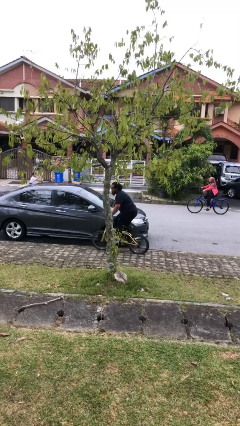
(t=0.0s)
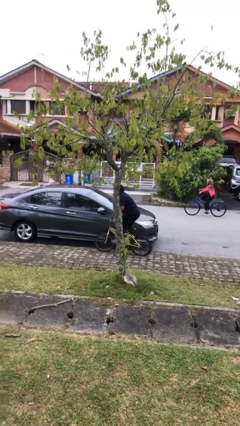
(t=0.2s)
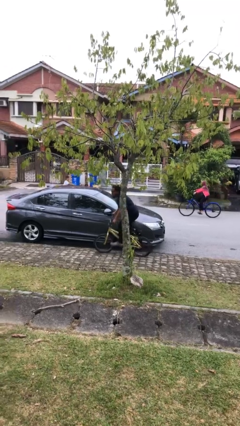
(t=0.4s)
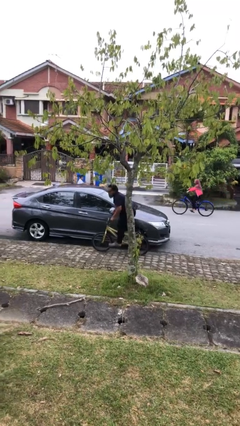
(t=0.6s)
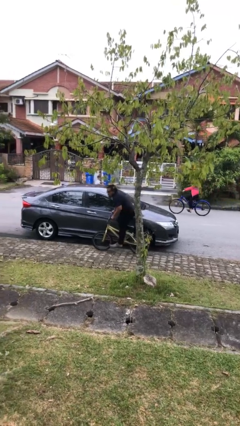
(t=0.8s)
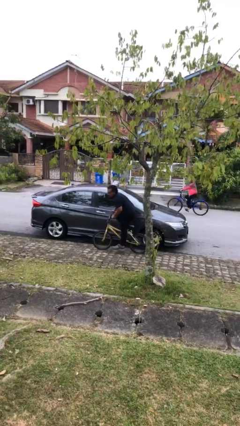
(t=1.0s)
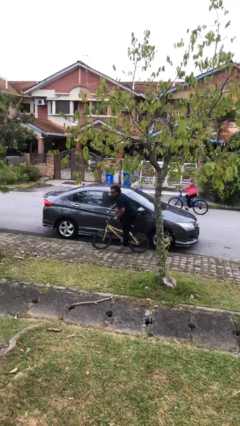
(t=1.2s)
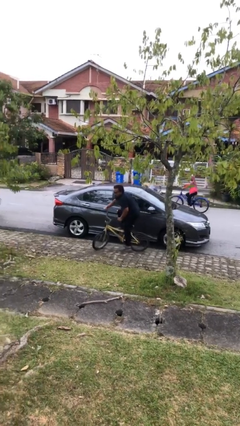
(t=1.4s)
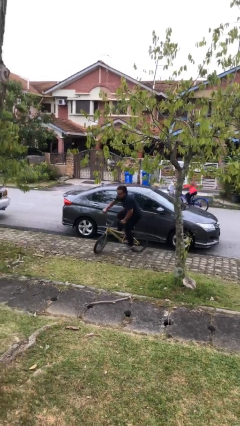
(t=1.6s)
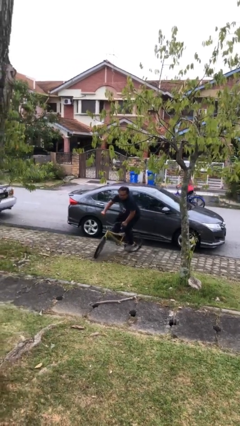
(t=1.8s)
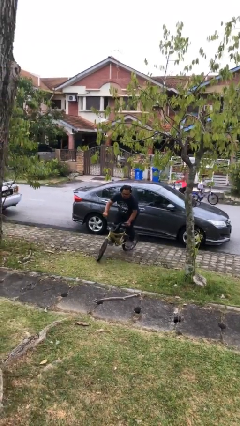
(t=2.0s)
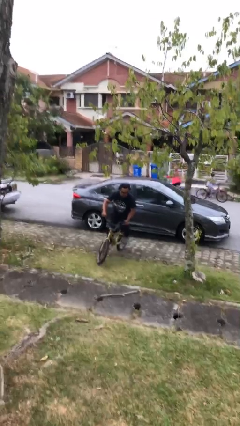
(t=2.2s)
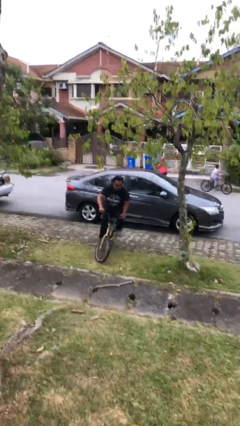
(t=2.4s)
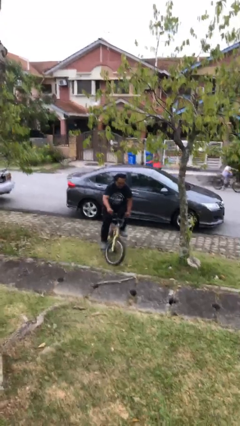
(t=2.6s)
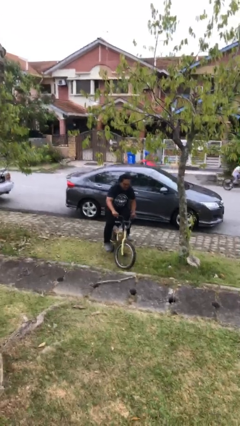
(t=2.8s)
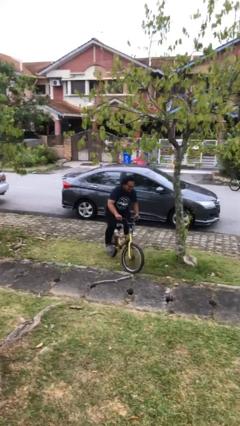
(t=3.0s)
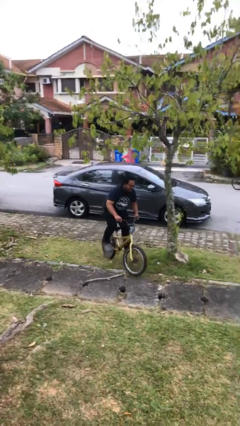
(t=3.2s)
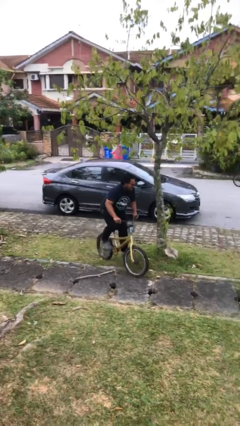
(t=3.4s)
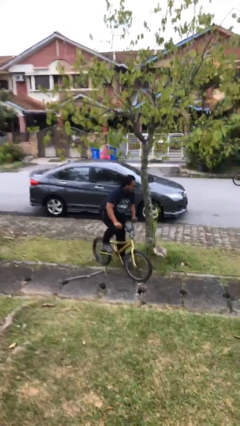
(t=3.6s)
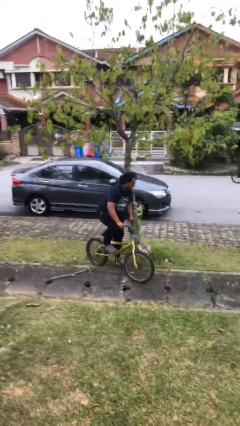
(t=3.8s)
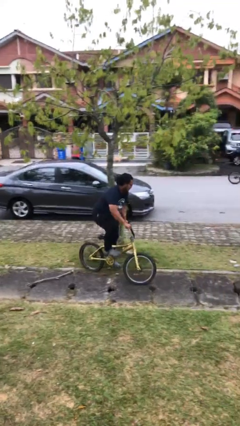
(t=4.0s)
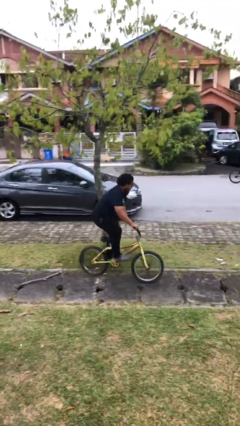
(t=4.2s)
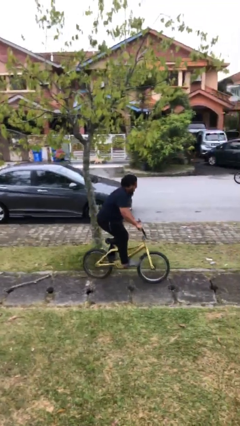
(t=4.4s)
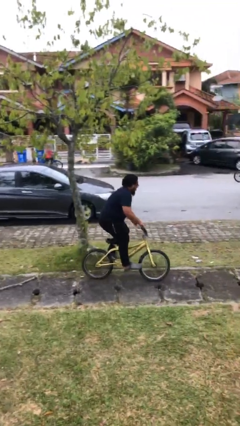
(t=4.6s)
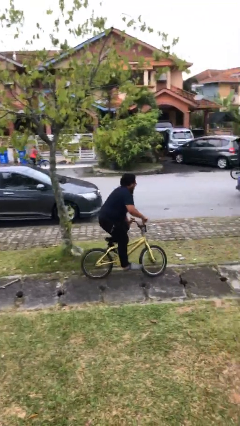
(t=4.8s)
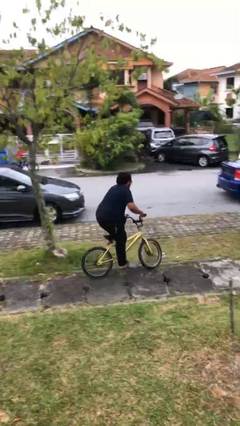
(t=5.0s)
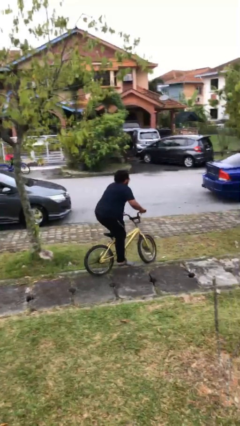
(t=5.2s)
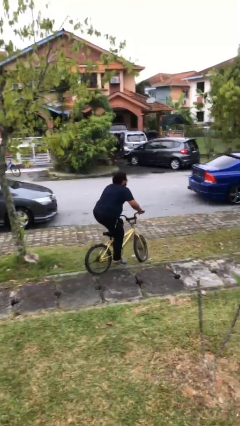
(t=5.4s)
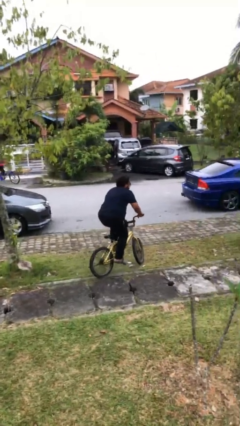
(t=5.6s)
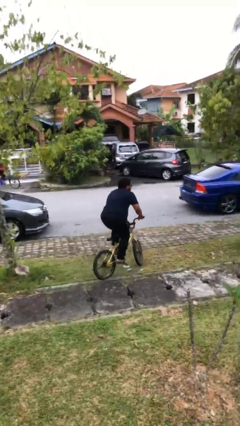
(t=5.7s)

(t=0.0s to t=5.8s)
person rides bicycle

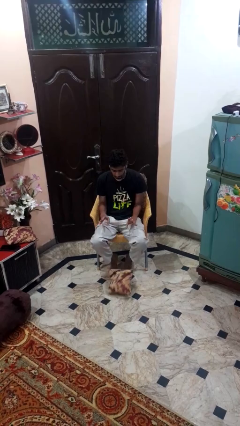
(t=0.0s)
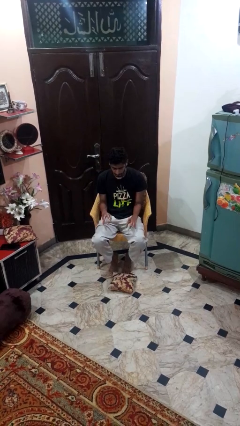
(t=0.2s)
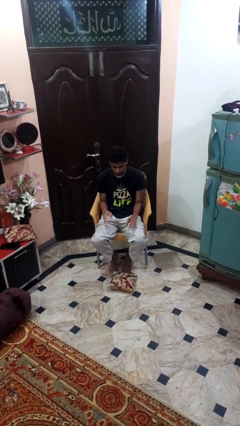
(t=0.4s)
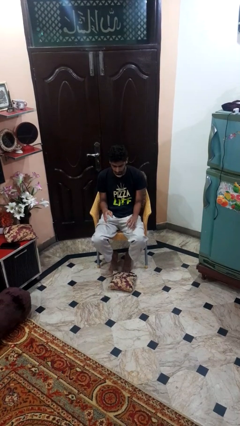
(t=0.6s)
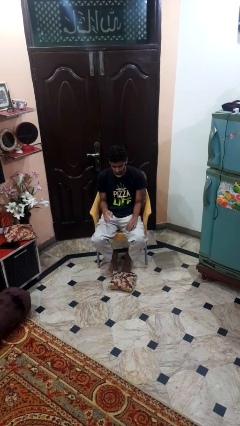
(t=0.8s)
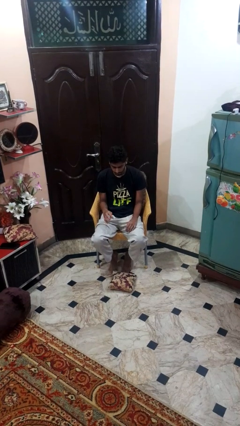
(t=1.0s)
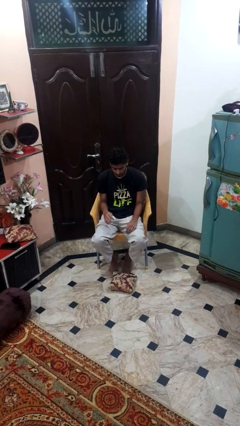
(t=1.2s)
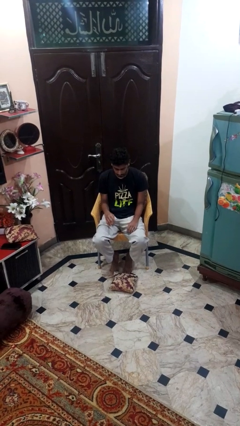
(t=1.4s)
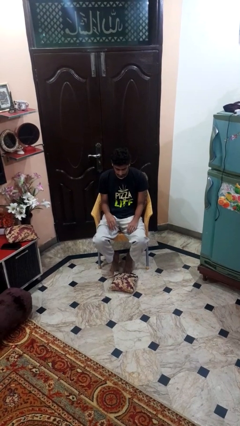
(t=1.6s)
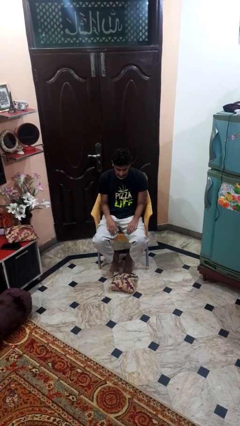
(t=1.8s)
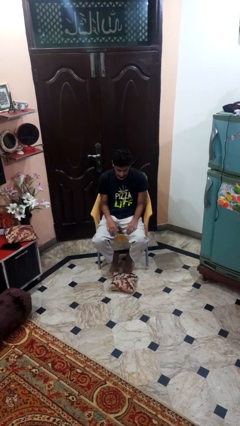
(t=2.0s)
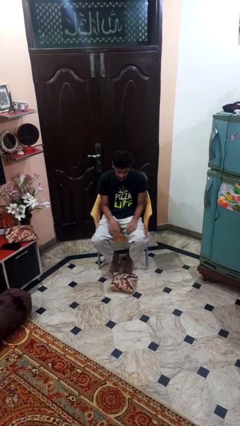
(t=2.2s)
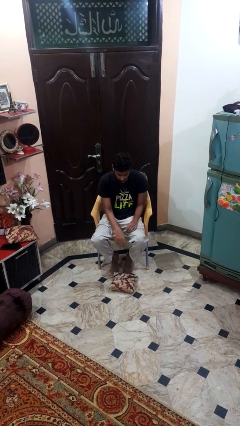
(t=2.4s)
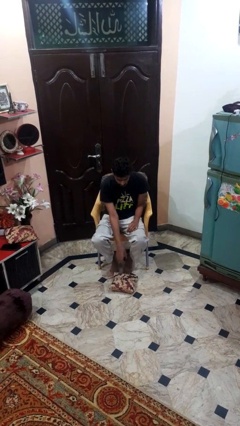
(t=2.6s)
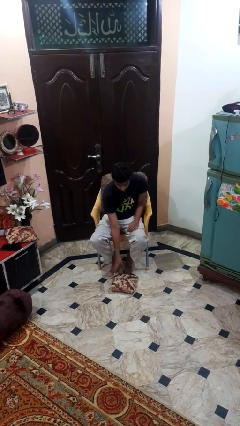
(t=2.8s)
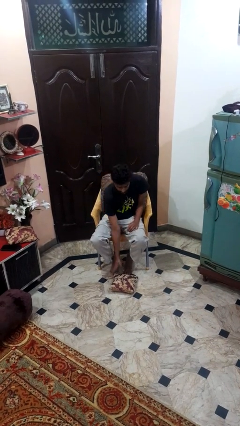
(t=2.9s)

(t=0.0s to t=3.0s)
person drops object

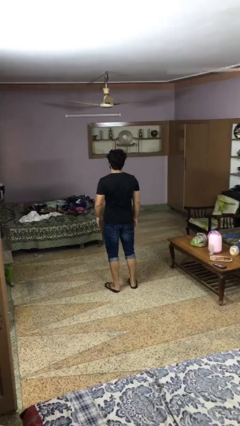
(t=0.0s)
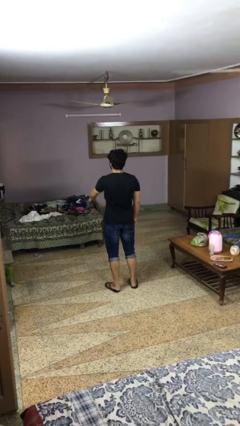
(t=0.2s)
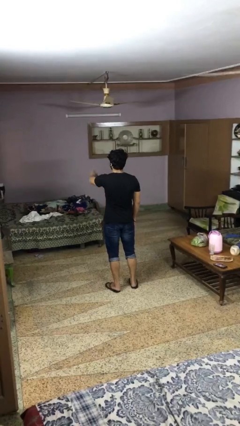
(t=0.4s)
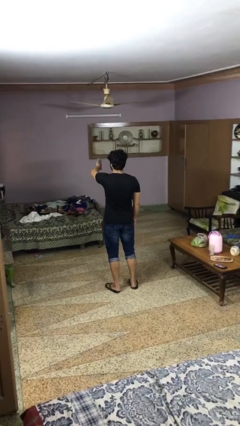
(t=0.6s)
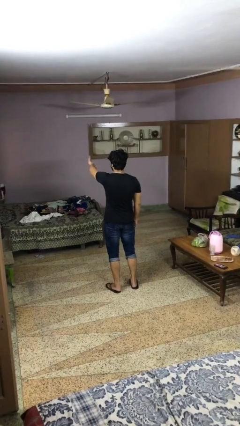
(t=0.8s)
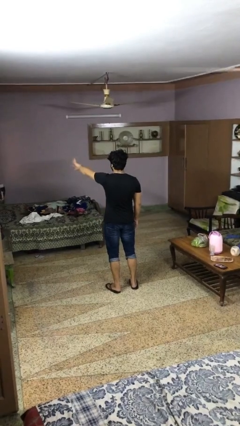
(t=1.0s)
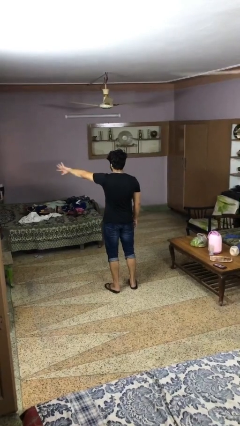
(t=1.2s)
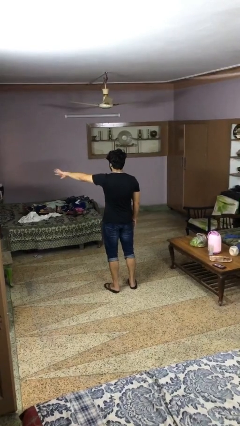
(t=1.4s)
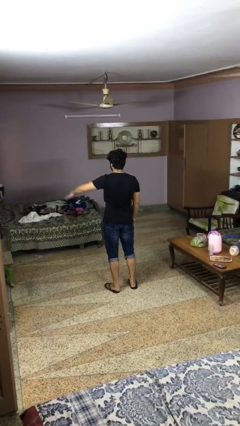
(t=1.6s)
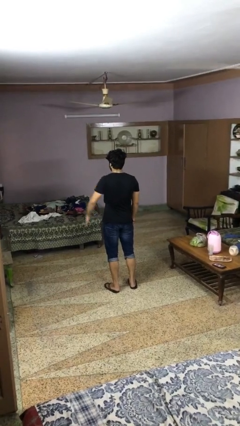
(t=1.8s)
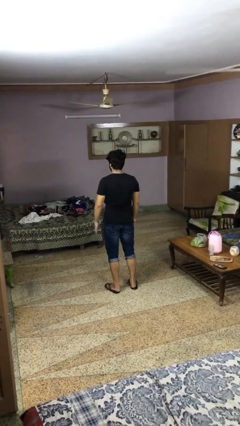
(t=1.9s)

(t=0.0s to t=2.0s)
person gestures swipe left

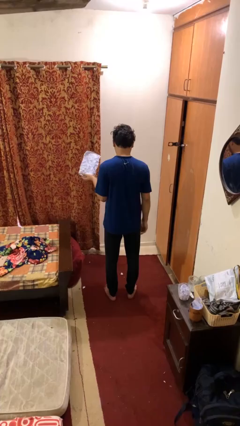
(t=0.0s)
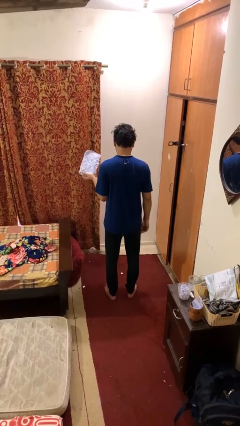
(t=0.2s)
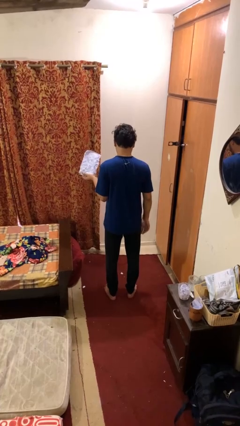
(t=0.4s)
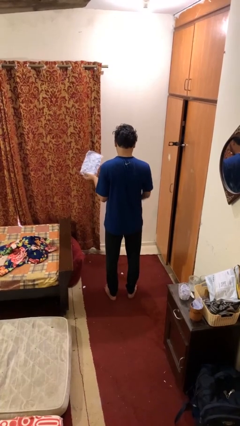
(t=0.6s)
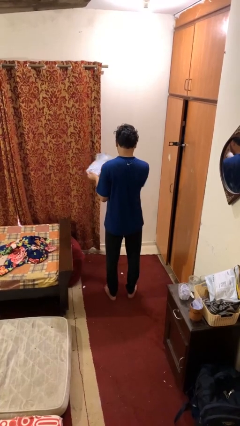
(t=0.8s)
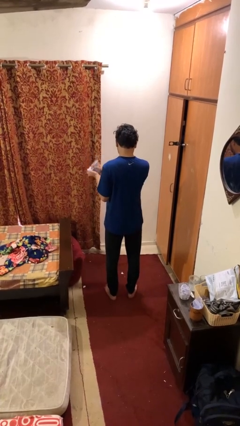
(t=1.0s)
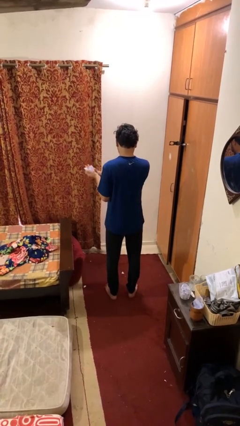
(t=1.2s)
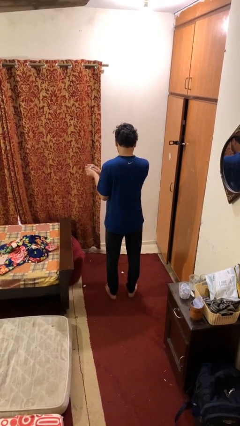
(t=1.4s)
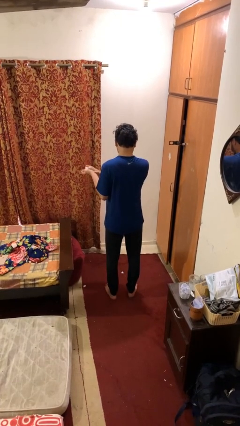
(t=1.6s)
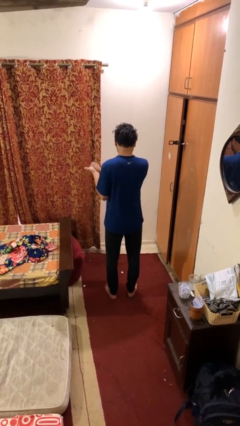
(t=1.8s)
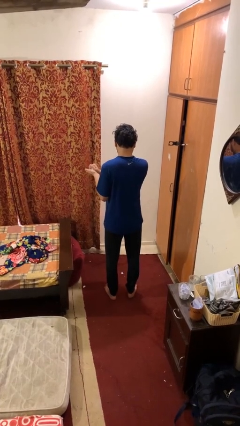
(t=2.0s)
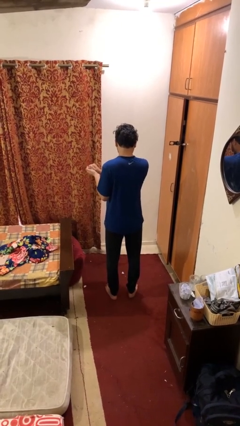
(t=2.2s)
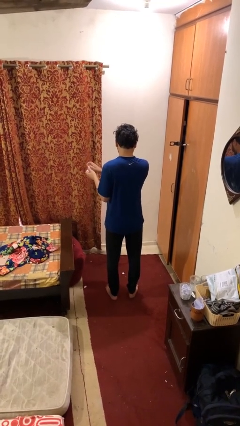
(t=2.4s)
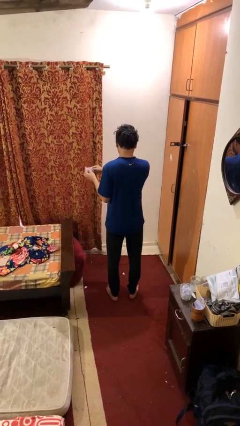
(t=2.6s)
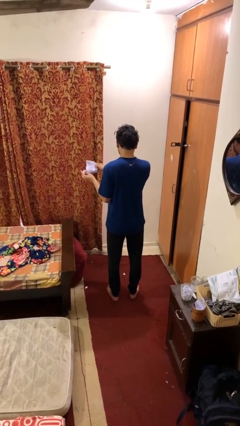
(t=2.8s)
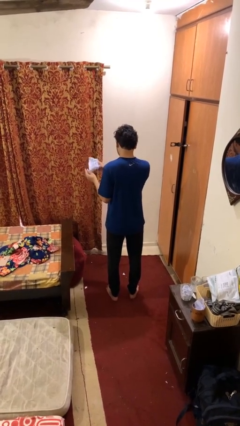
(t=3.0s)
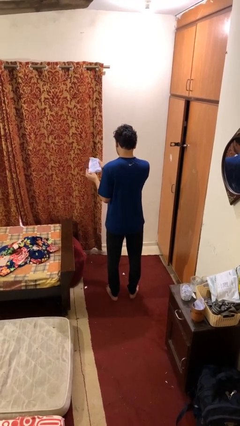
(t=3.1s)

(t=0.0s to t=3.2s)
person crumples paper

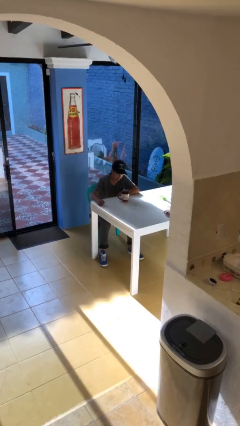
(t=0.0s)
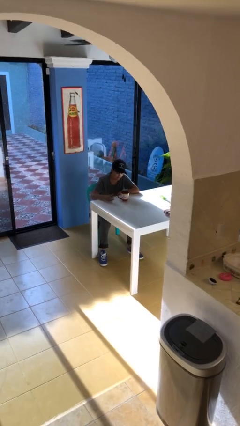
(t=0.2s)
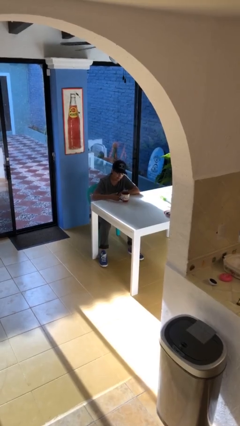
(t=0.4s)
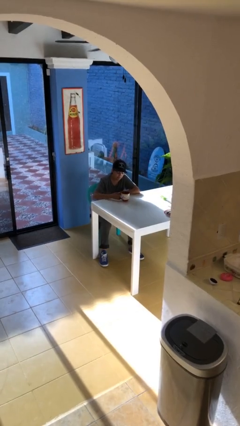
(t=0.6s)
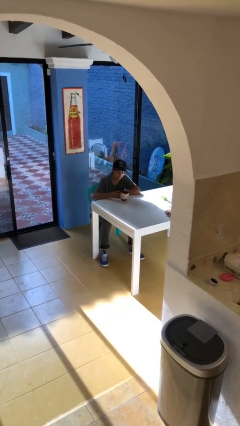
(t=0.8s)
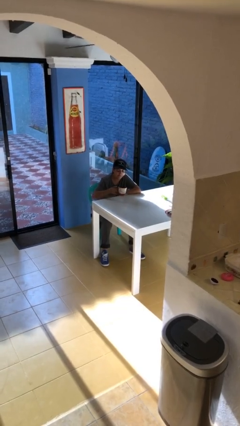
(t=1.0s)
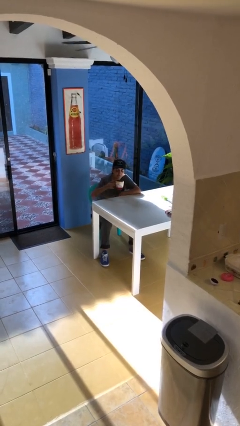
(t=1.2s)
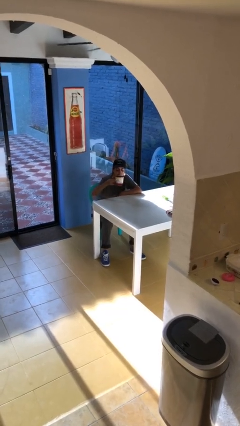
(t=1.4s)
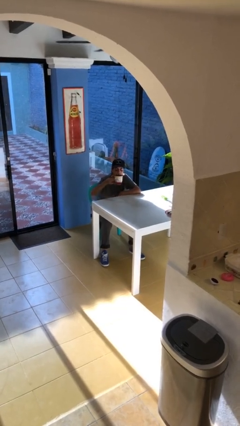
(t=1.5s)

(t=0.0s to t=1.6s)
person picks up object from table

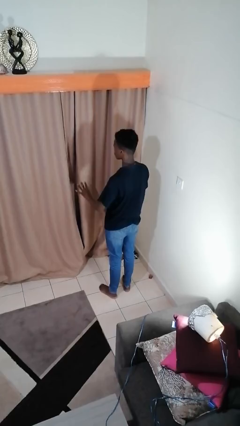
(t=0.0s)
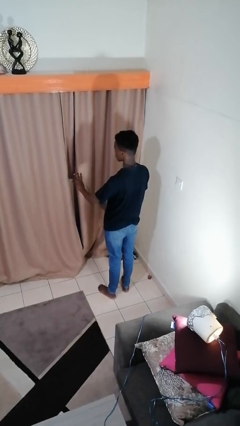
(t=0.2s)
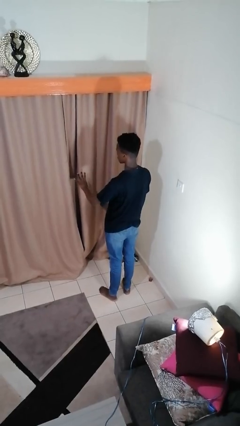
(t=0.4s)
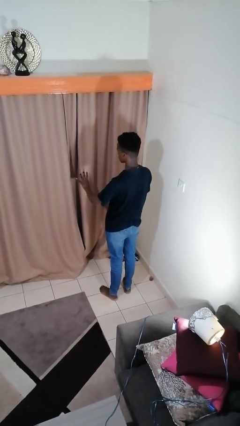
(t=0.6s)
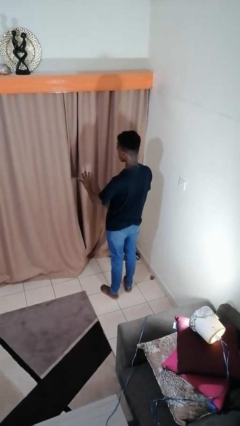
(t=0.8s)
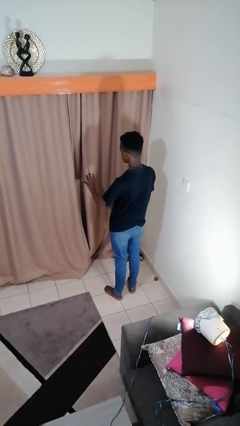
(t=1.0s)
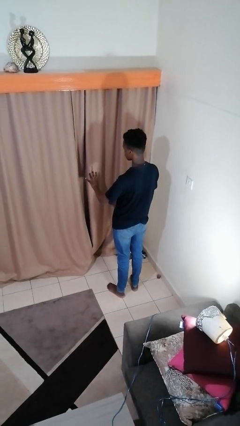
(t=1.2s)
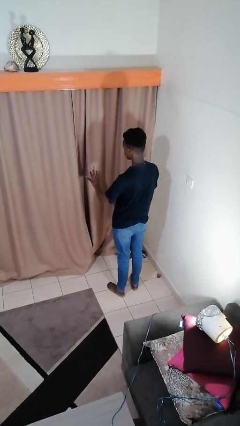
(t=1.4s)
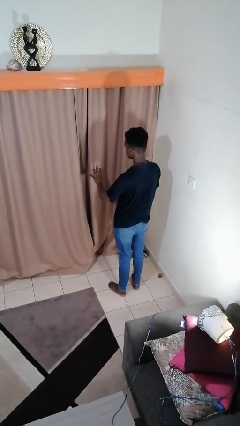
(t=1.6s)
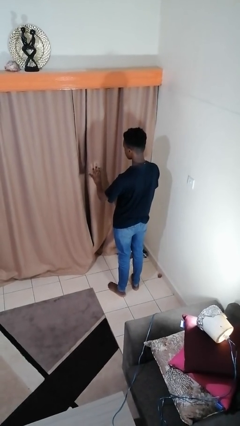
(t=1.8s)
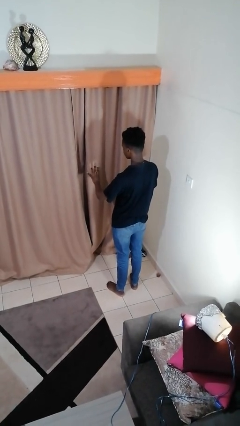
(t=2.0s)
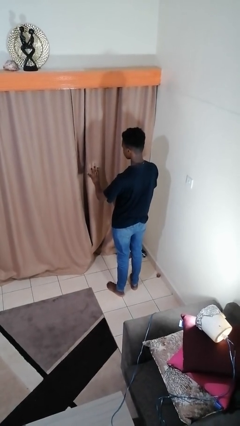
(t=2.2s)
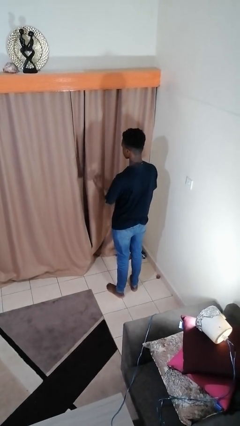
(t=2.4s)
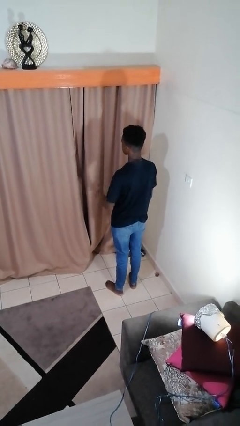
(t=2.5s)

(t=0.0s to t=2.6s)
person gestures number four
